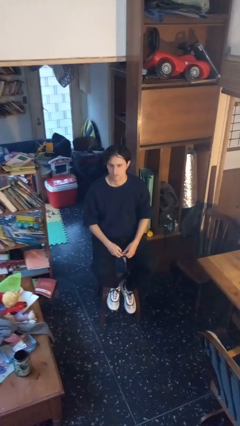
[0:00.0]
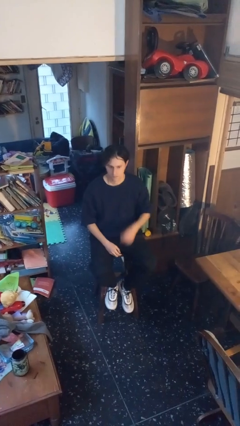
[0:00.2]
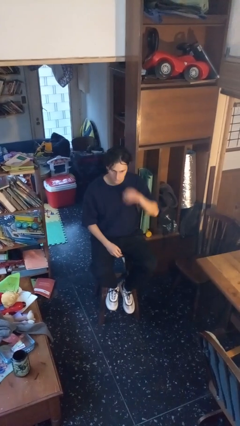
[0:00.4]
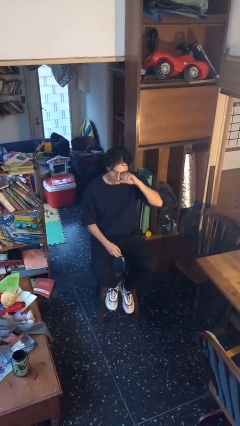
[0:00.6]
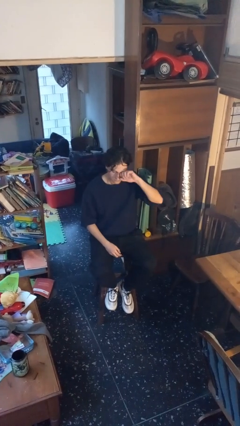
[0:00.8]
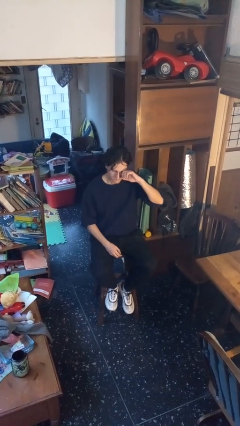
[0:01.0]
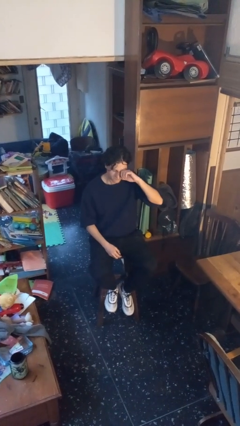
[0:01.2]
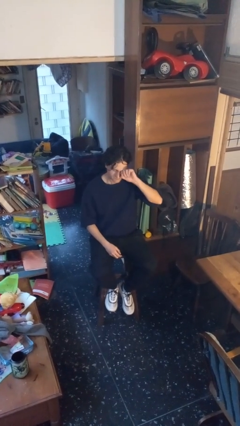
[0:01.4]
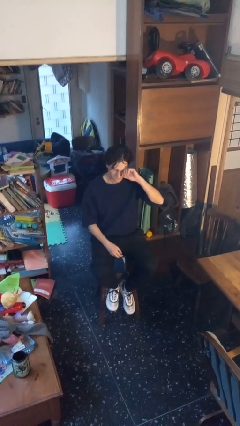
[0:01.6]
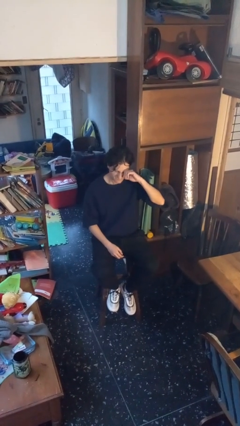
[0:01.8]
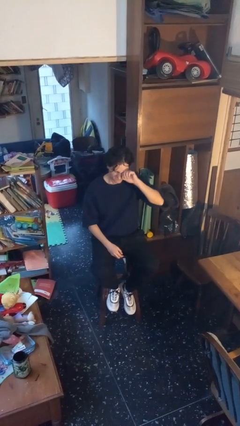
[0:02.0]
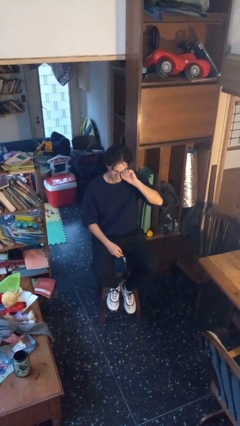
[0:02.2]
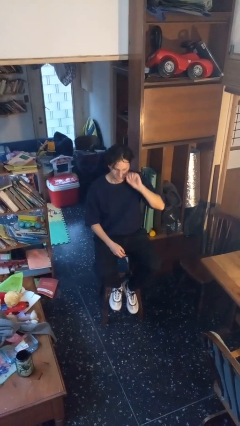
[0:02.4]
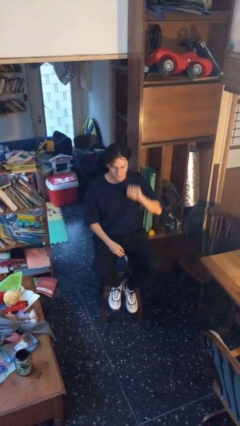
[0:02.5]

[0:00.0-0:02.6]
person rubs eyes

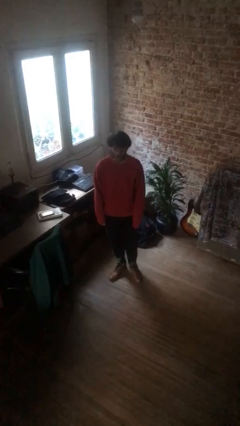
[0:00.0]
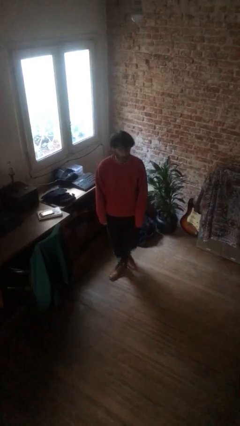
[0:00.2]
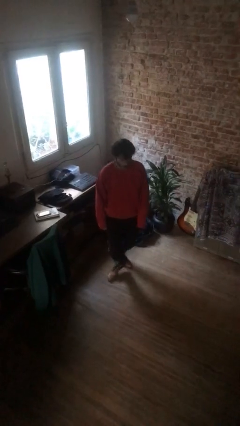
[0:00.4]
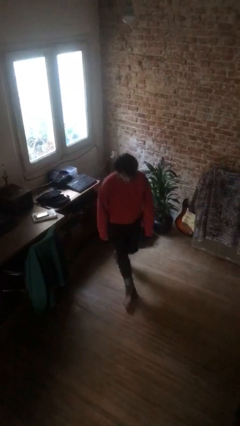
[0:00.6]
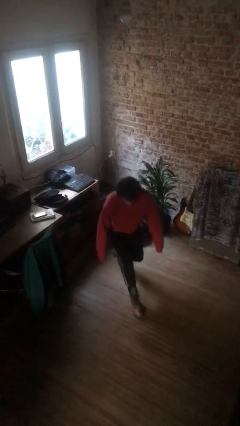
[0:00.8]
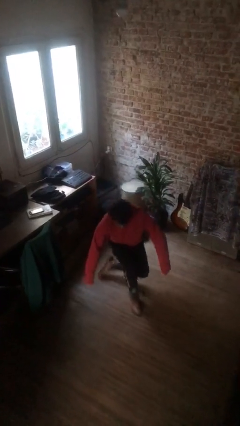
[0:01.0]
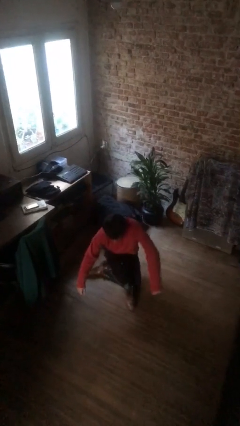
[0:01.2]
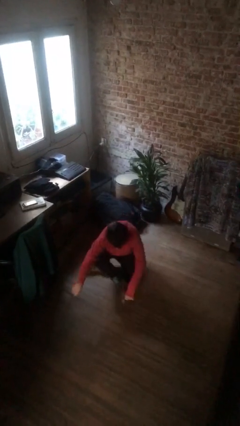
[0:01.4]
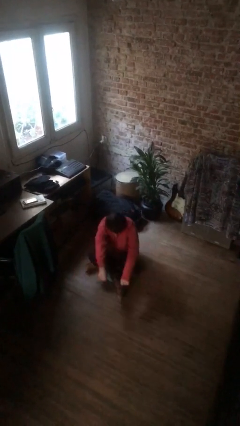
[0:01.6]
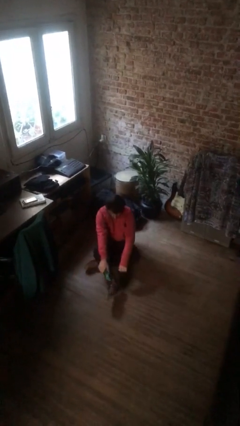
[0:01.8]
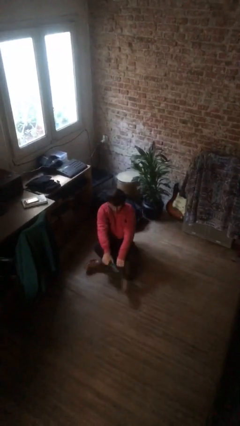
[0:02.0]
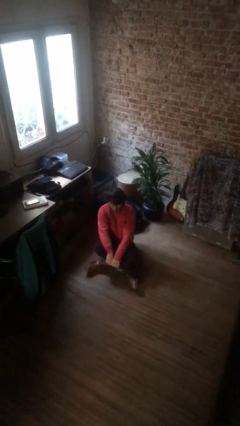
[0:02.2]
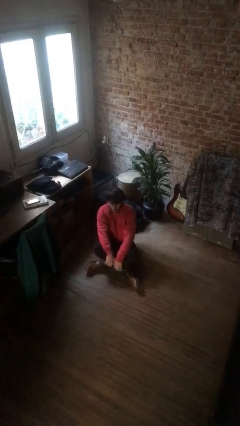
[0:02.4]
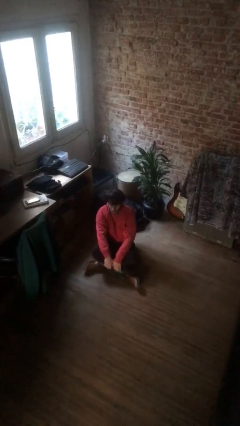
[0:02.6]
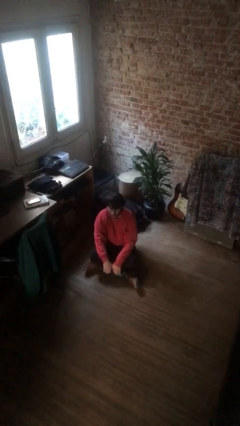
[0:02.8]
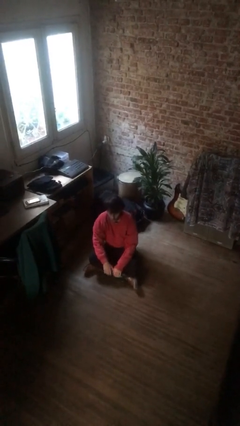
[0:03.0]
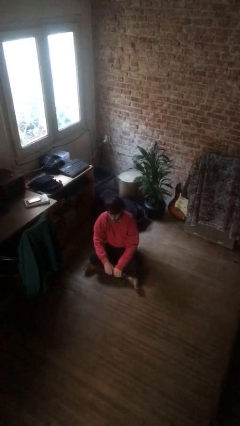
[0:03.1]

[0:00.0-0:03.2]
person sits crisscross

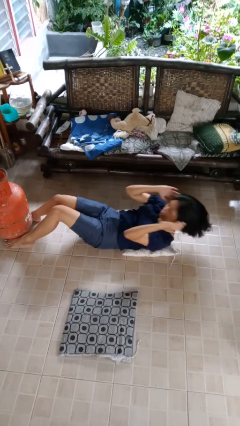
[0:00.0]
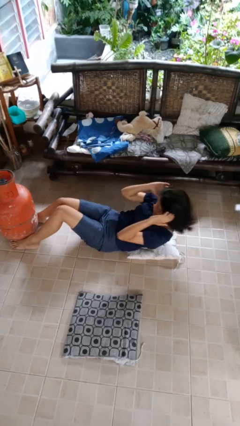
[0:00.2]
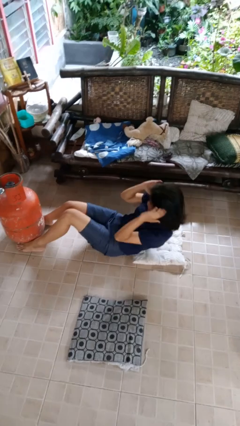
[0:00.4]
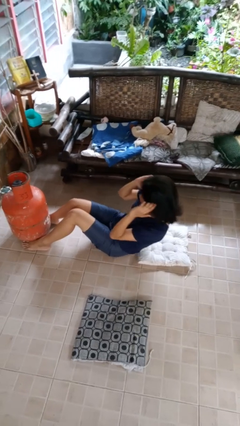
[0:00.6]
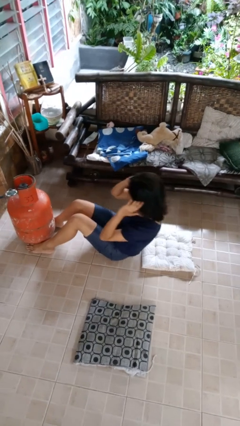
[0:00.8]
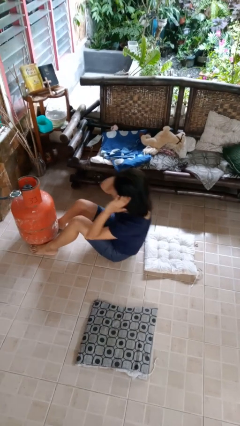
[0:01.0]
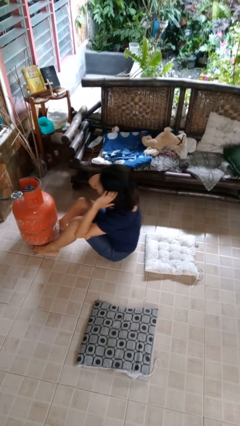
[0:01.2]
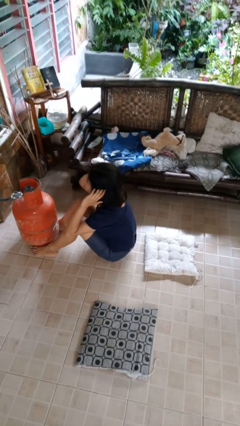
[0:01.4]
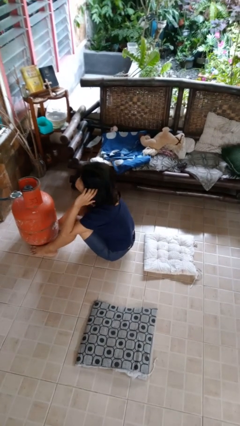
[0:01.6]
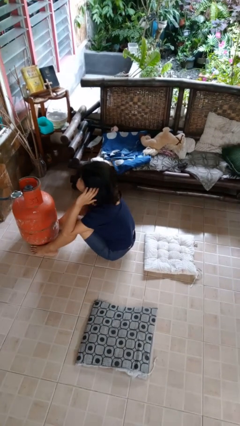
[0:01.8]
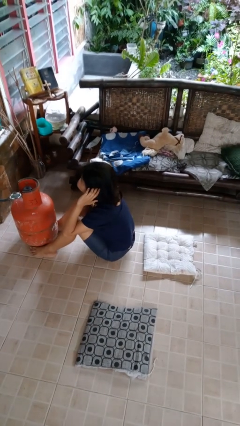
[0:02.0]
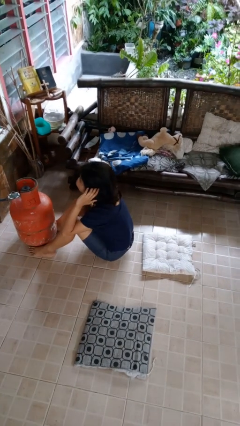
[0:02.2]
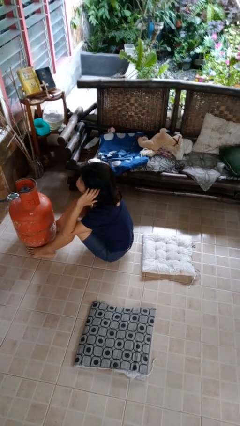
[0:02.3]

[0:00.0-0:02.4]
person exercises with situp

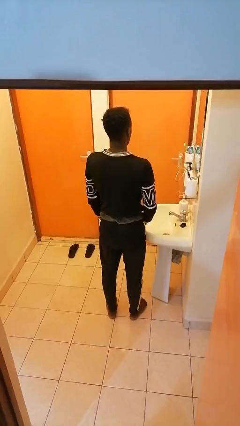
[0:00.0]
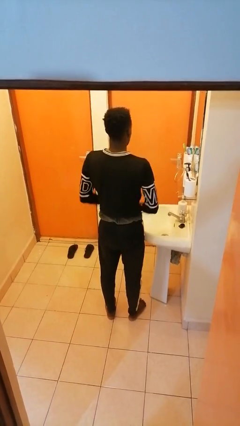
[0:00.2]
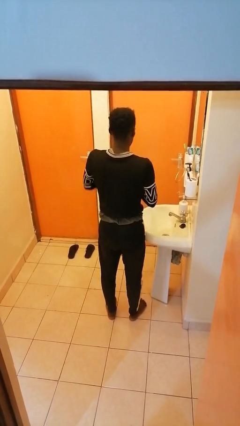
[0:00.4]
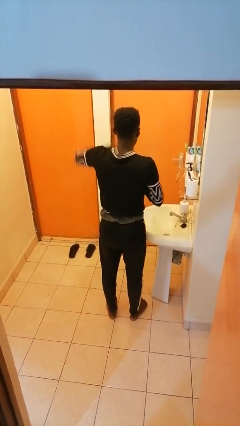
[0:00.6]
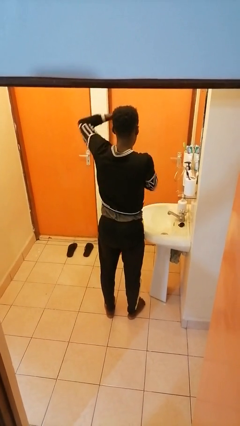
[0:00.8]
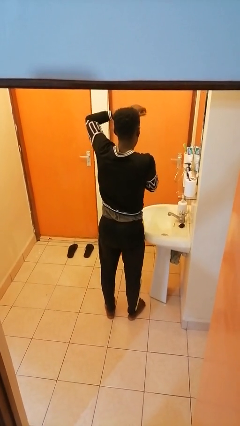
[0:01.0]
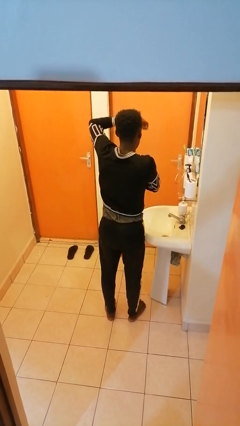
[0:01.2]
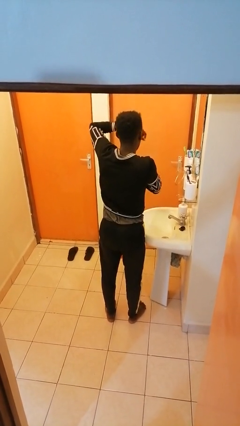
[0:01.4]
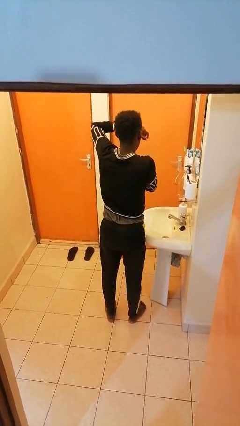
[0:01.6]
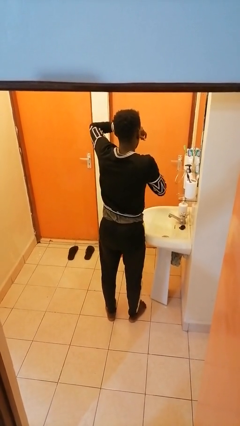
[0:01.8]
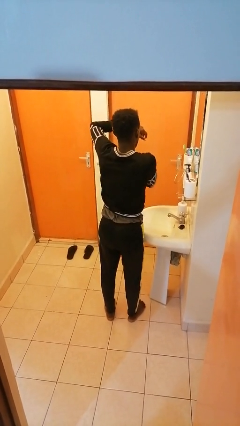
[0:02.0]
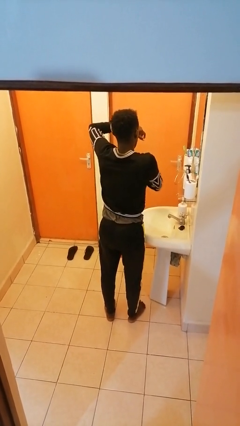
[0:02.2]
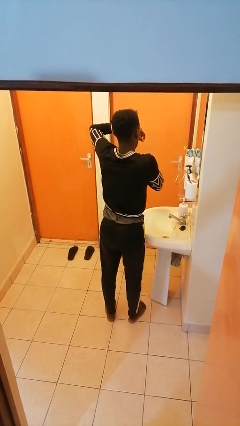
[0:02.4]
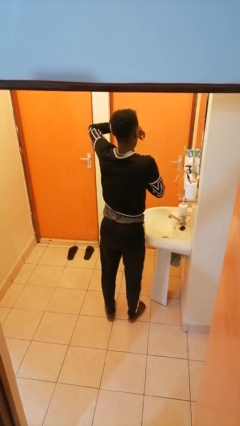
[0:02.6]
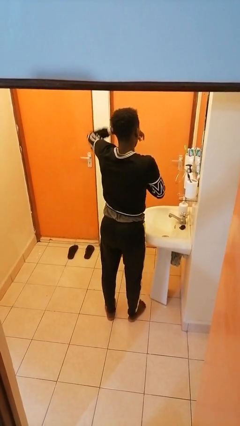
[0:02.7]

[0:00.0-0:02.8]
person applies deodorant

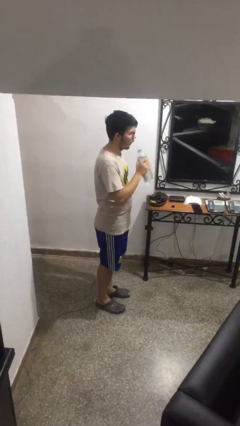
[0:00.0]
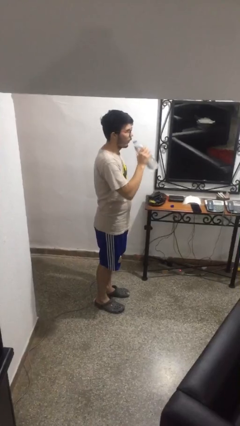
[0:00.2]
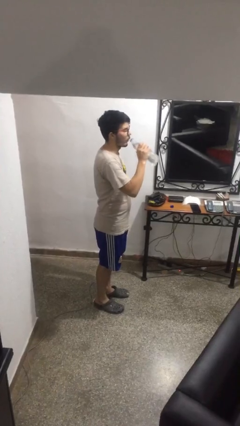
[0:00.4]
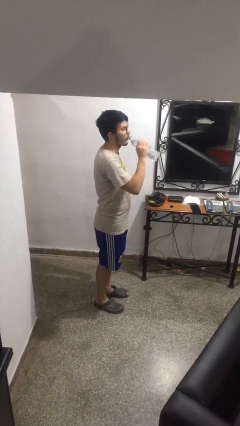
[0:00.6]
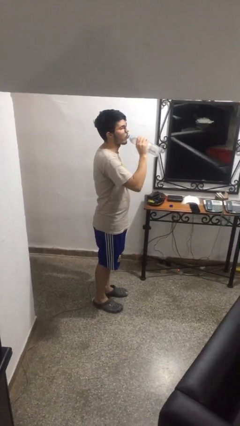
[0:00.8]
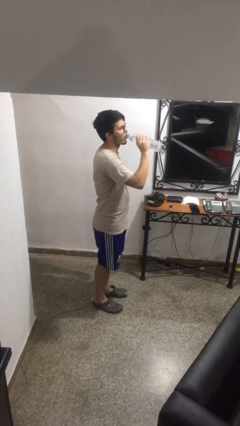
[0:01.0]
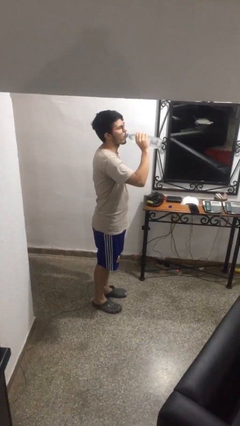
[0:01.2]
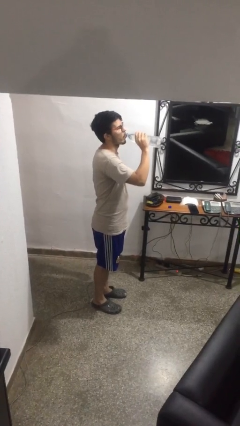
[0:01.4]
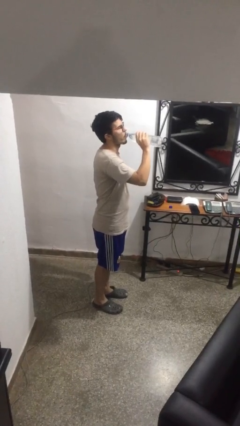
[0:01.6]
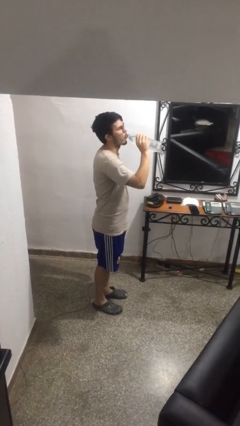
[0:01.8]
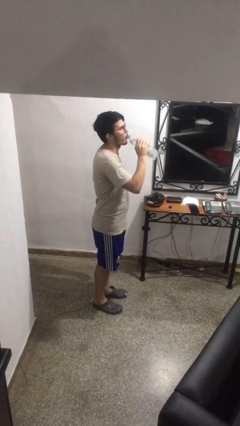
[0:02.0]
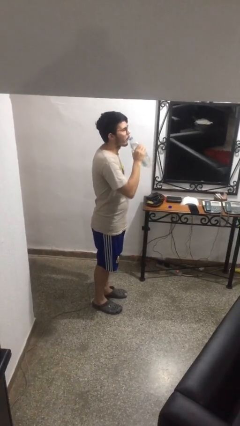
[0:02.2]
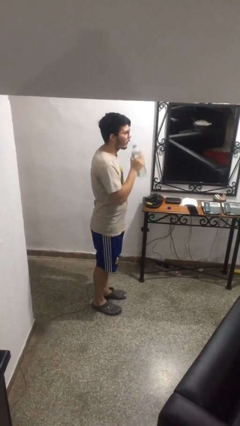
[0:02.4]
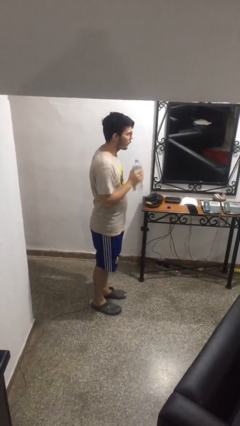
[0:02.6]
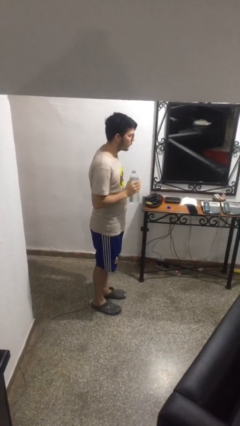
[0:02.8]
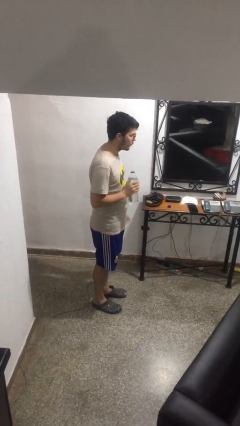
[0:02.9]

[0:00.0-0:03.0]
person drinks from bottle

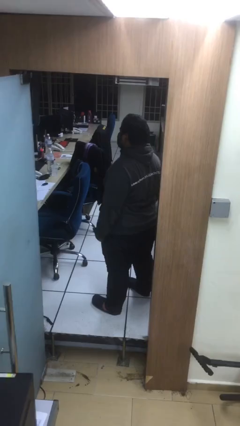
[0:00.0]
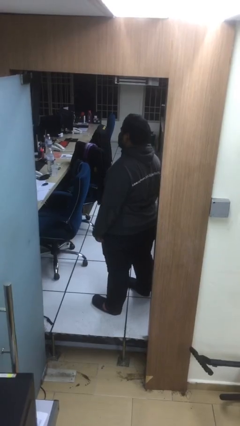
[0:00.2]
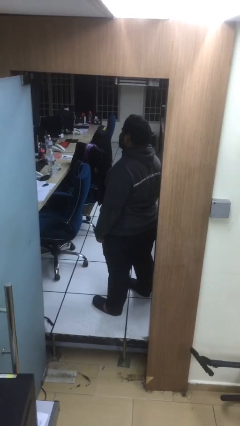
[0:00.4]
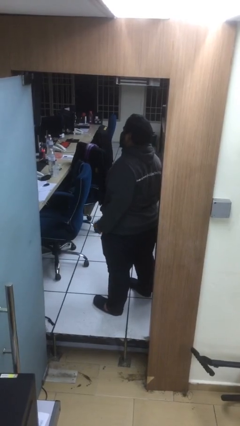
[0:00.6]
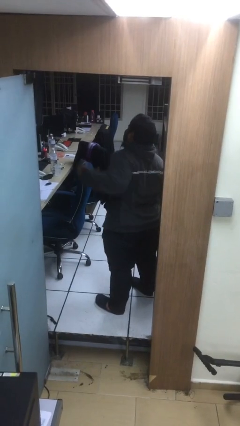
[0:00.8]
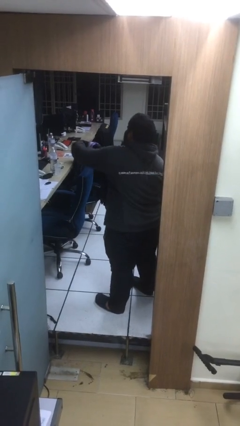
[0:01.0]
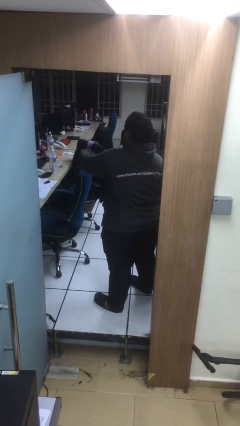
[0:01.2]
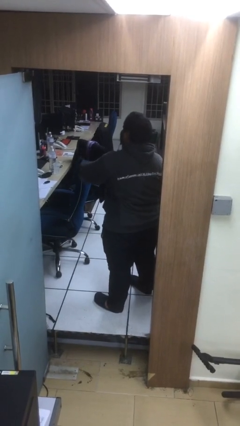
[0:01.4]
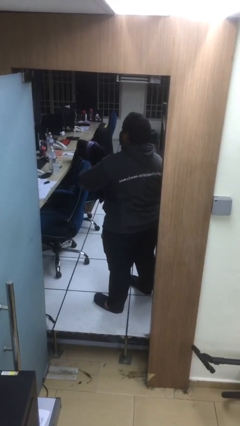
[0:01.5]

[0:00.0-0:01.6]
person punches

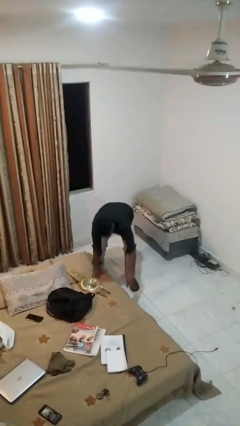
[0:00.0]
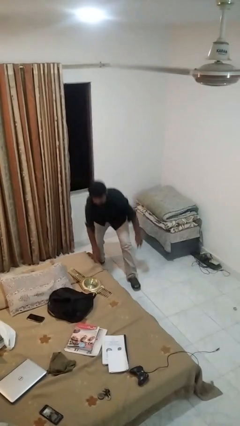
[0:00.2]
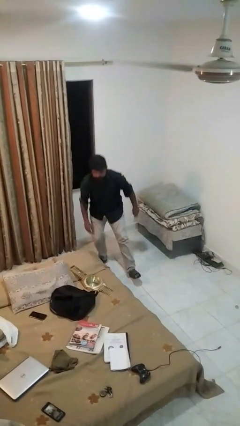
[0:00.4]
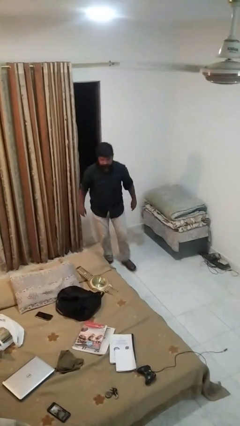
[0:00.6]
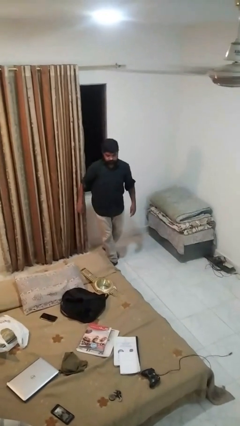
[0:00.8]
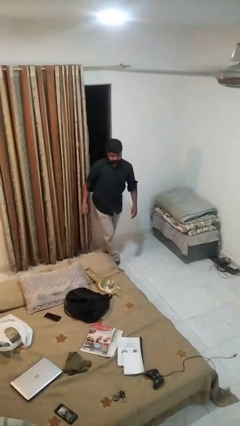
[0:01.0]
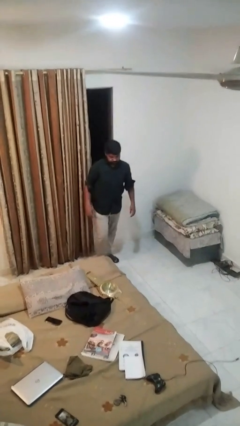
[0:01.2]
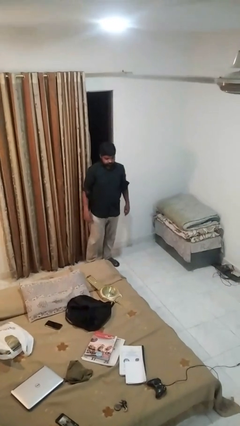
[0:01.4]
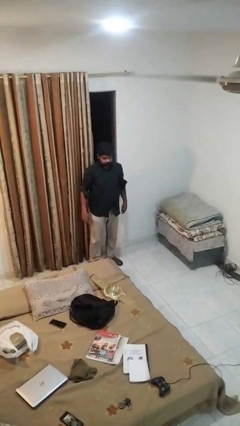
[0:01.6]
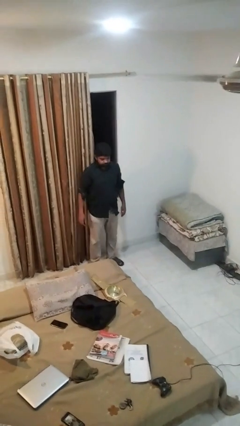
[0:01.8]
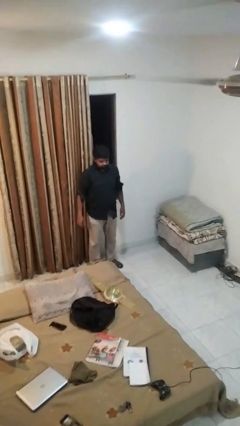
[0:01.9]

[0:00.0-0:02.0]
person stands up from floor
